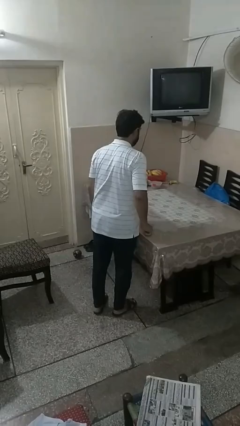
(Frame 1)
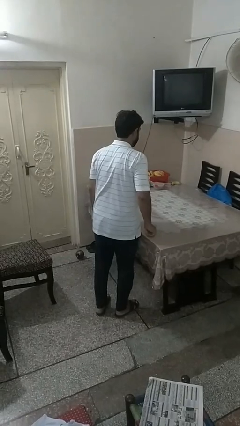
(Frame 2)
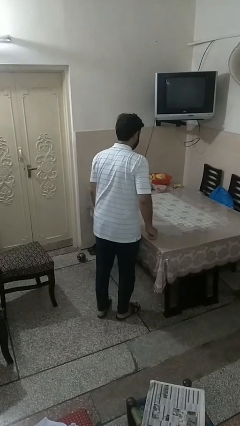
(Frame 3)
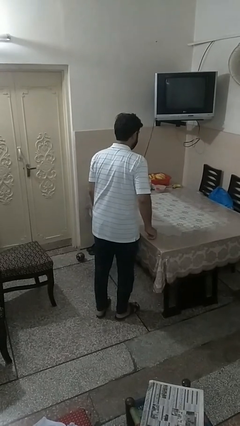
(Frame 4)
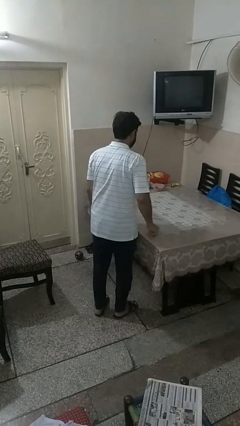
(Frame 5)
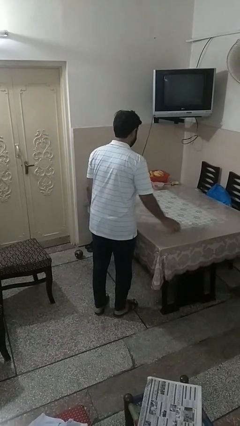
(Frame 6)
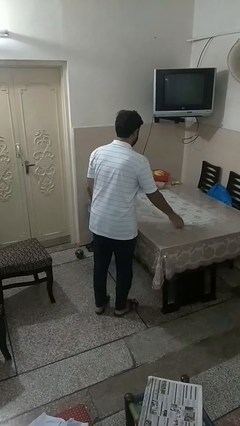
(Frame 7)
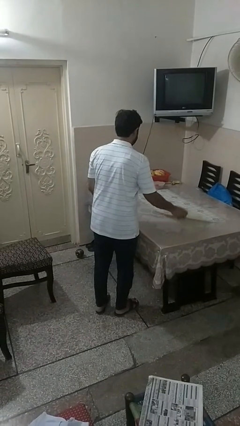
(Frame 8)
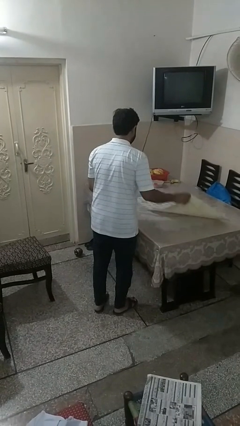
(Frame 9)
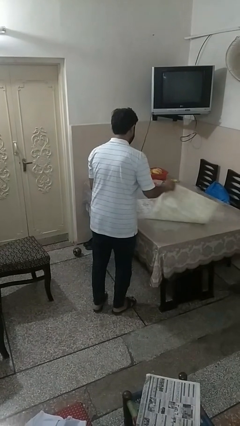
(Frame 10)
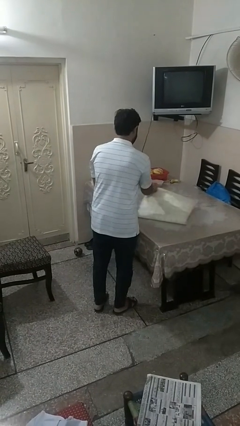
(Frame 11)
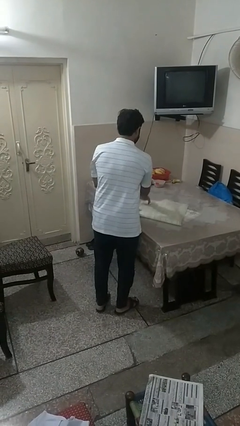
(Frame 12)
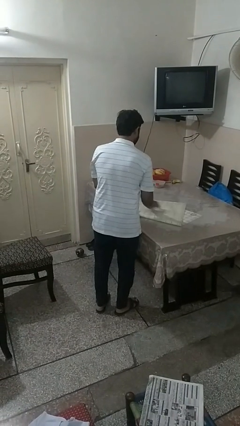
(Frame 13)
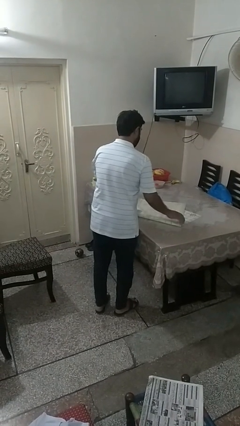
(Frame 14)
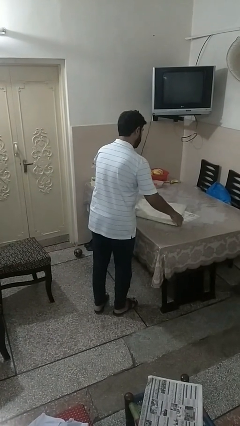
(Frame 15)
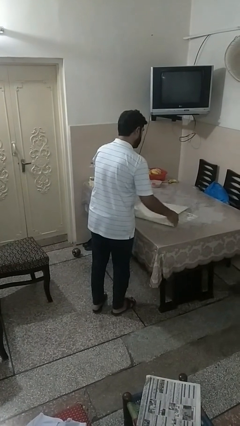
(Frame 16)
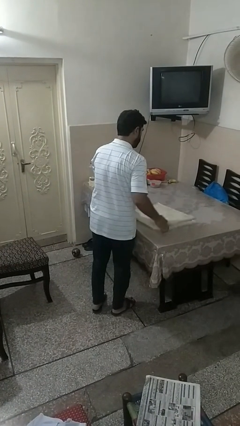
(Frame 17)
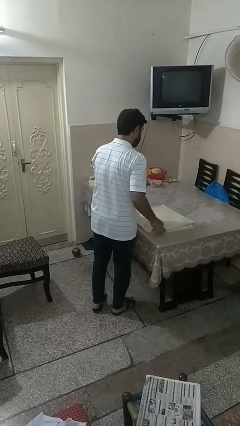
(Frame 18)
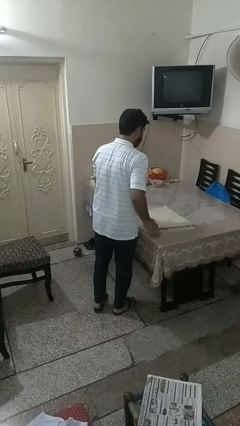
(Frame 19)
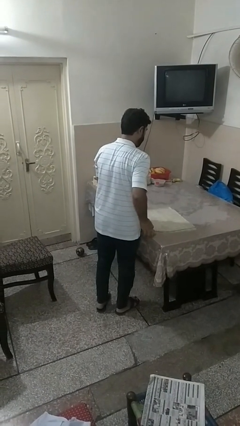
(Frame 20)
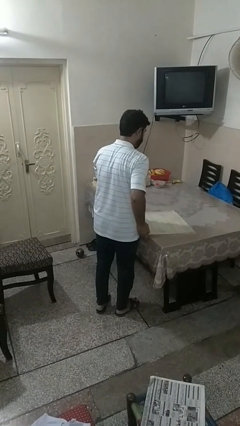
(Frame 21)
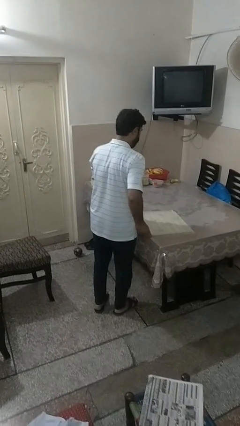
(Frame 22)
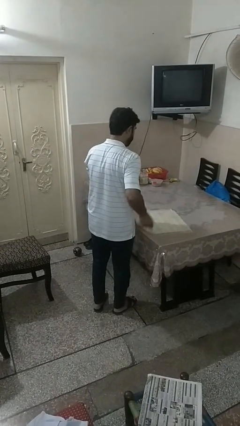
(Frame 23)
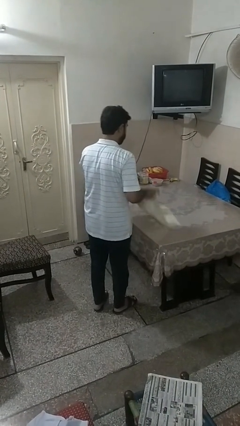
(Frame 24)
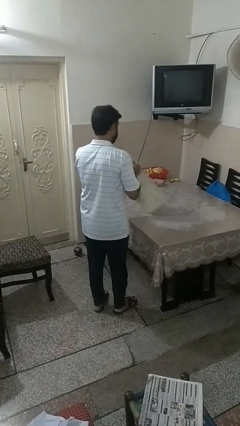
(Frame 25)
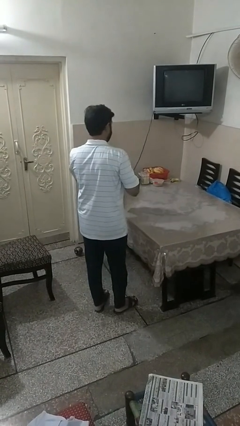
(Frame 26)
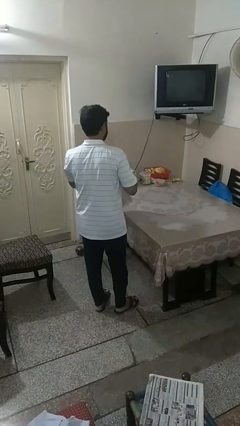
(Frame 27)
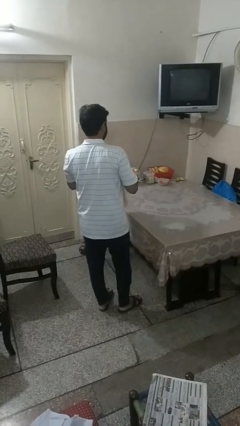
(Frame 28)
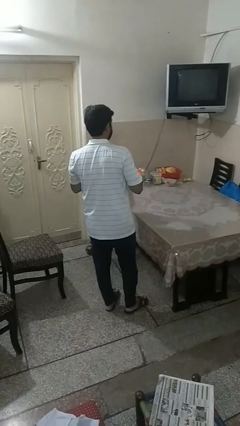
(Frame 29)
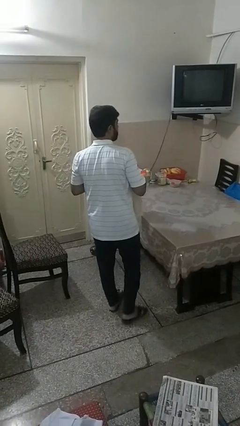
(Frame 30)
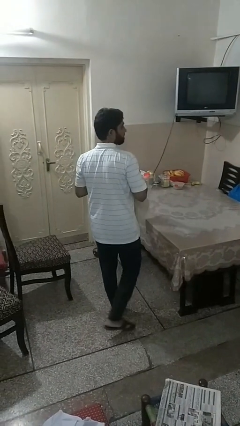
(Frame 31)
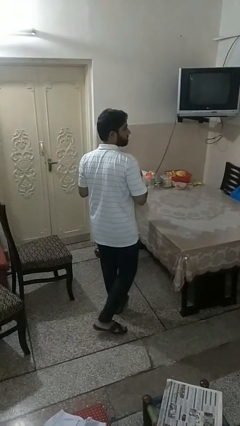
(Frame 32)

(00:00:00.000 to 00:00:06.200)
person folds tablecloth

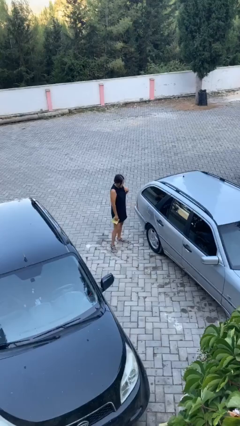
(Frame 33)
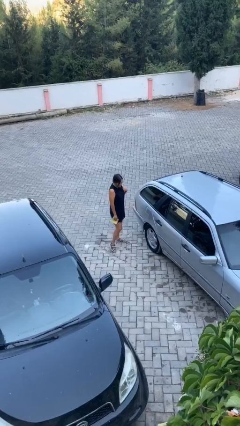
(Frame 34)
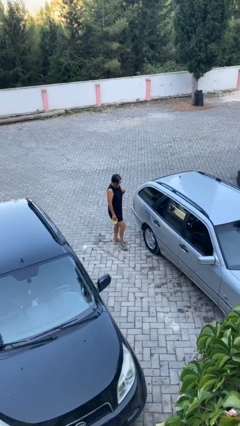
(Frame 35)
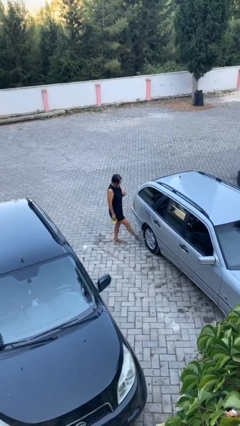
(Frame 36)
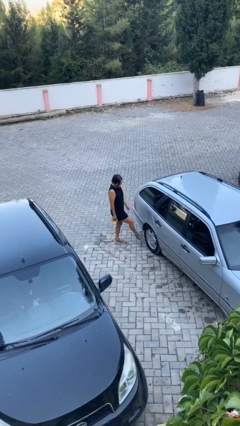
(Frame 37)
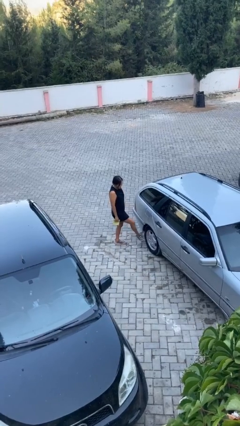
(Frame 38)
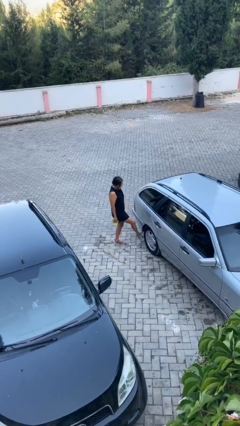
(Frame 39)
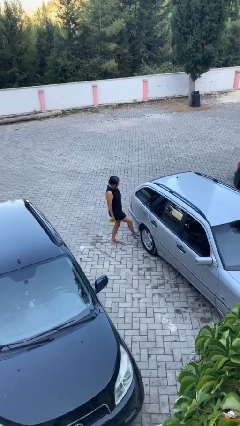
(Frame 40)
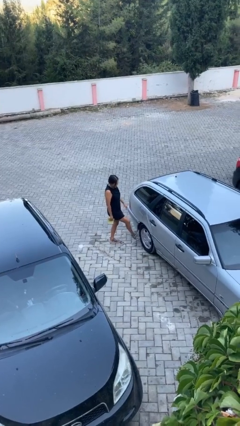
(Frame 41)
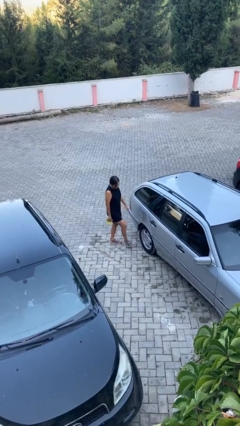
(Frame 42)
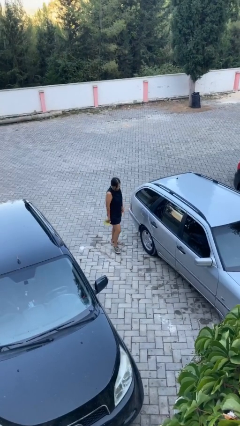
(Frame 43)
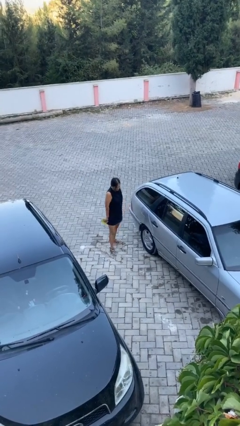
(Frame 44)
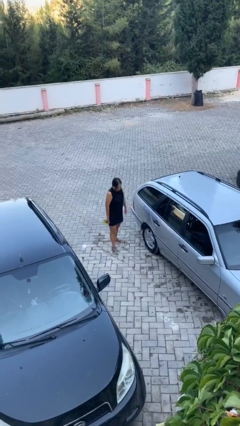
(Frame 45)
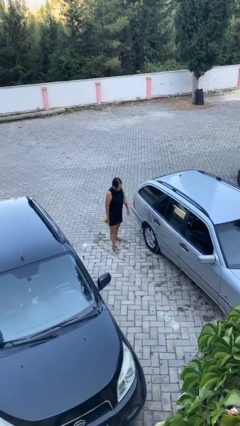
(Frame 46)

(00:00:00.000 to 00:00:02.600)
person kicks car tires

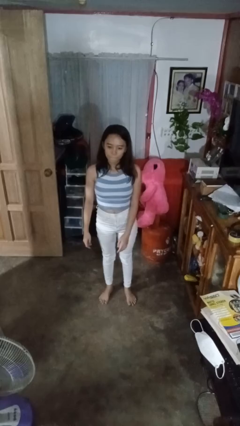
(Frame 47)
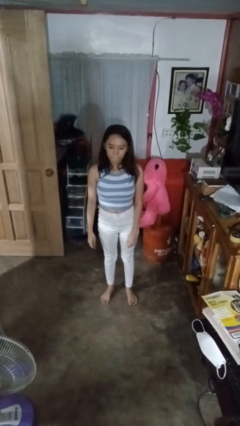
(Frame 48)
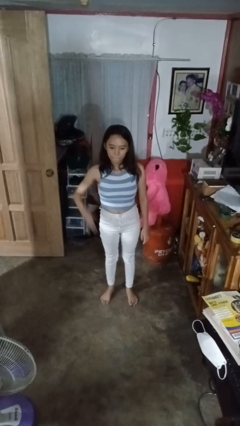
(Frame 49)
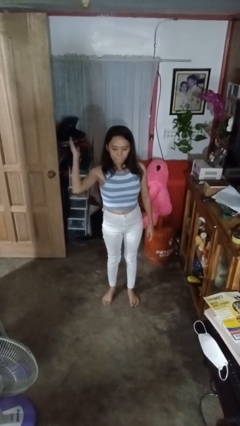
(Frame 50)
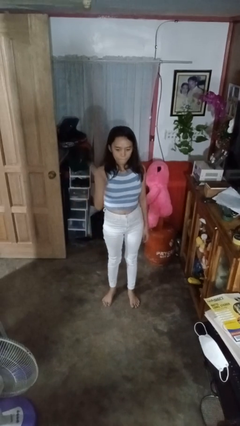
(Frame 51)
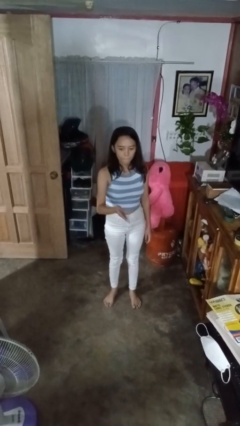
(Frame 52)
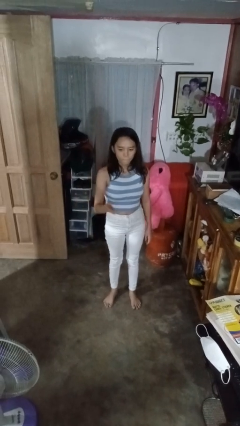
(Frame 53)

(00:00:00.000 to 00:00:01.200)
person karate chop

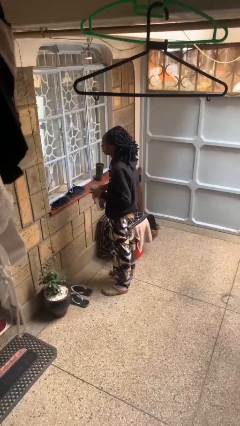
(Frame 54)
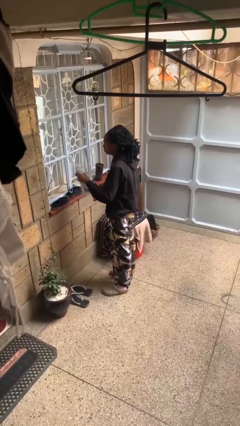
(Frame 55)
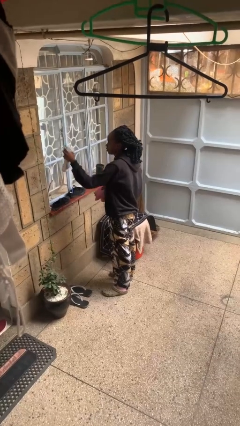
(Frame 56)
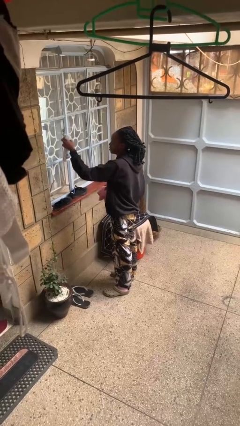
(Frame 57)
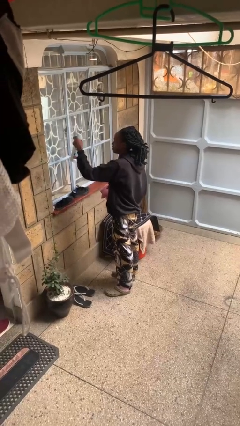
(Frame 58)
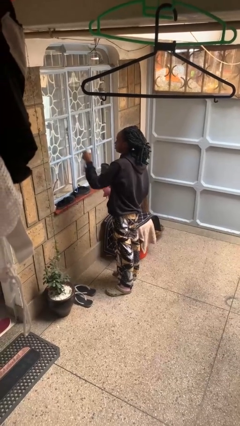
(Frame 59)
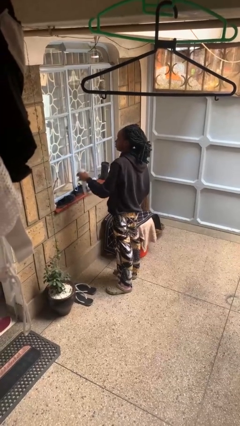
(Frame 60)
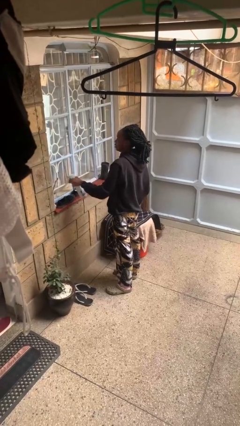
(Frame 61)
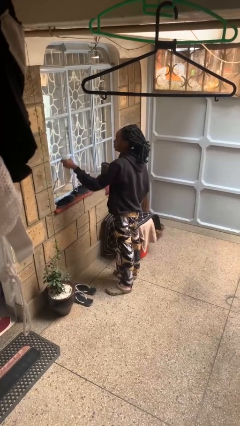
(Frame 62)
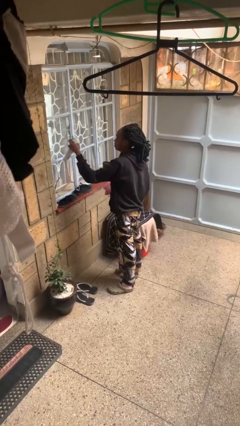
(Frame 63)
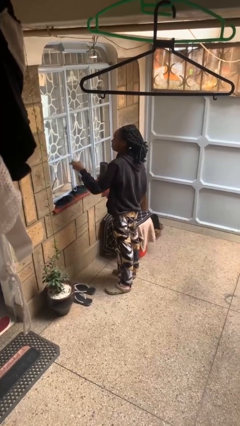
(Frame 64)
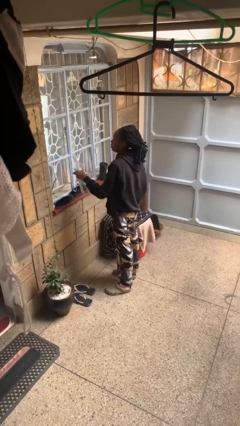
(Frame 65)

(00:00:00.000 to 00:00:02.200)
person sprays from bottle

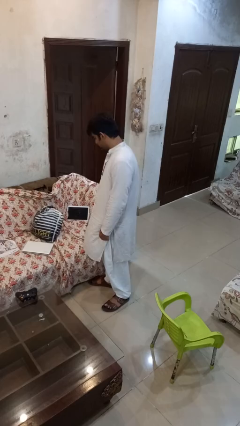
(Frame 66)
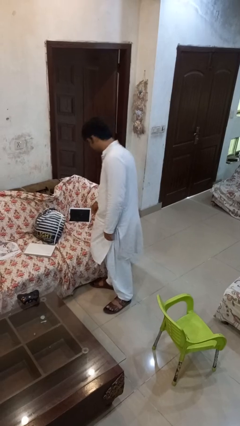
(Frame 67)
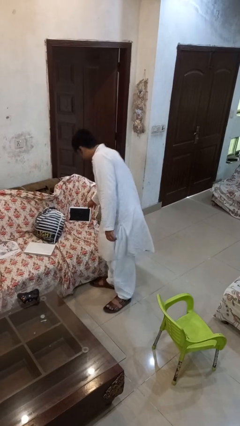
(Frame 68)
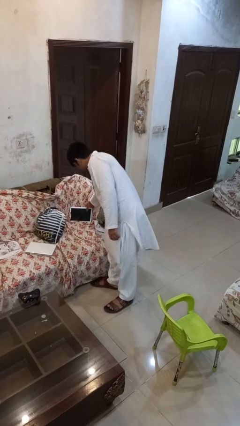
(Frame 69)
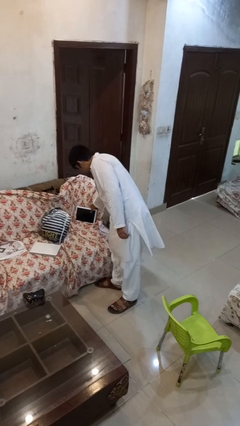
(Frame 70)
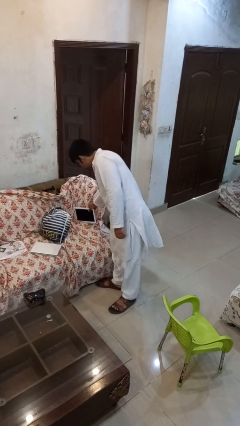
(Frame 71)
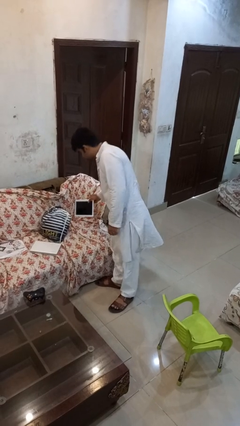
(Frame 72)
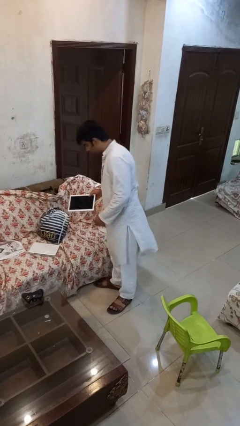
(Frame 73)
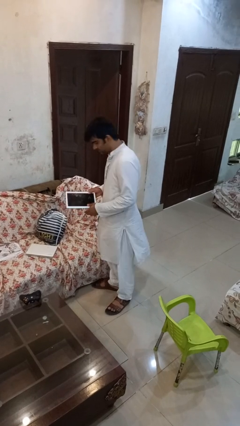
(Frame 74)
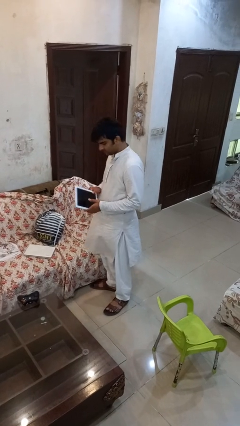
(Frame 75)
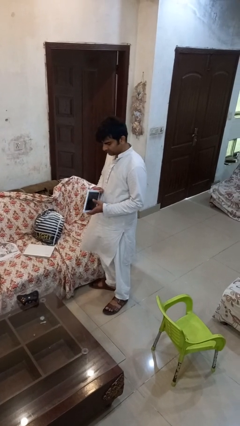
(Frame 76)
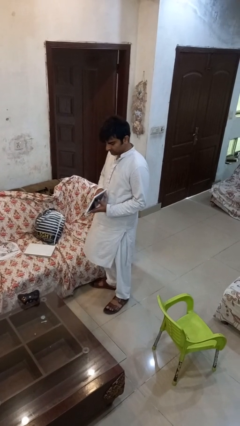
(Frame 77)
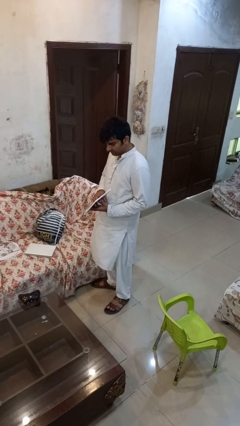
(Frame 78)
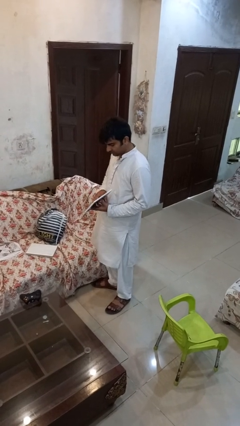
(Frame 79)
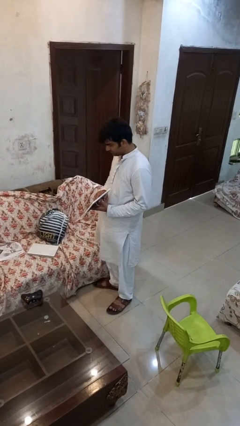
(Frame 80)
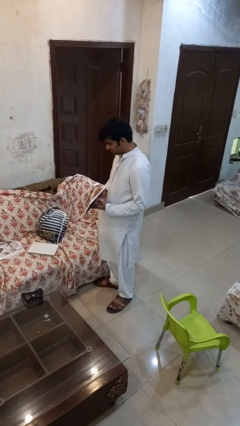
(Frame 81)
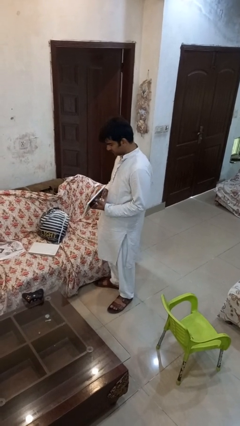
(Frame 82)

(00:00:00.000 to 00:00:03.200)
person picks up object from couch

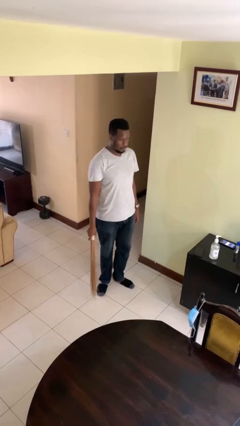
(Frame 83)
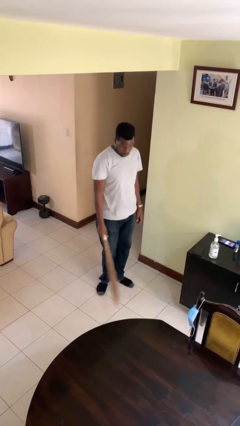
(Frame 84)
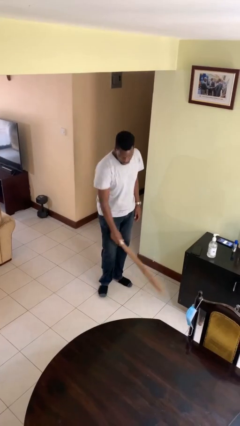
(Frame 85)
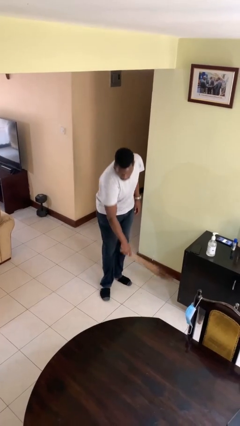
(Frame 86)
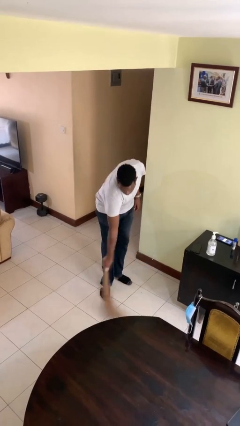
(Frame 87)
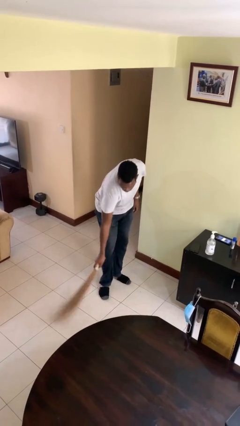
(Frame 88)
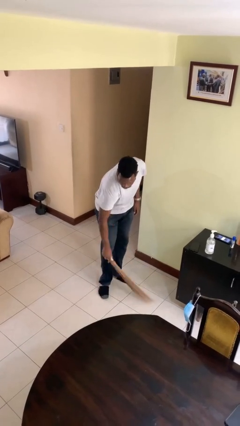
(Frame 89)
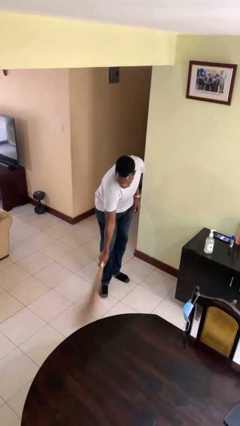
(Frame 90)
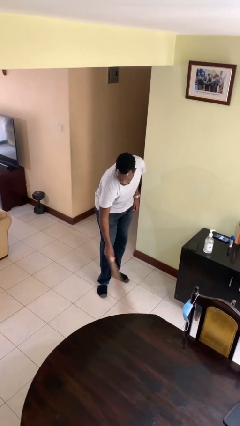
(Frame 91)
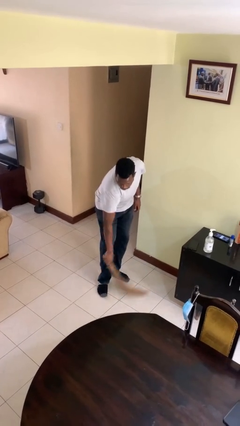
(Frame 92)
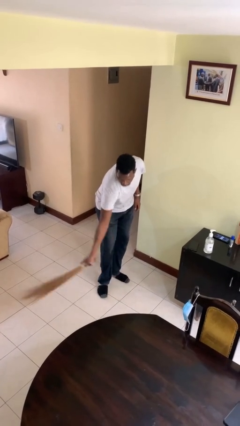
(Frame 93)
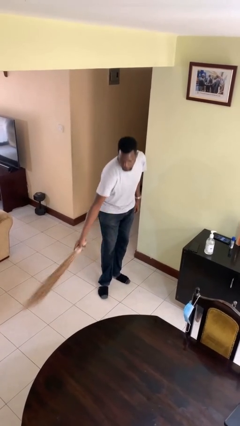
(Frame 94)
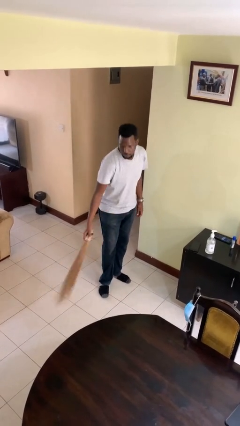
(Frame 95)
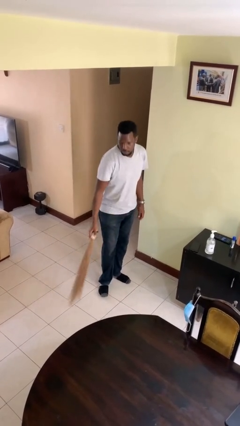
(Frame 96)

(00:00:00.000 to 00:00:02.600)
person sweeps floor
